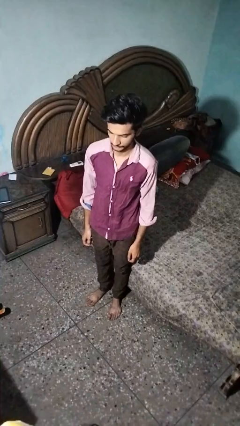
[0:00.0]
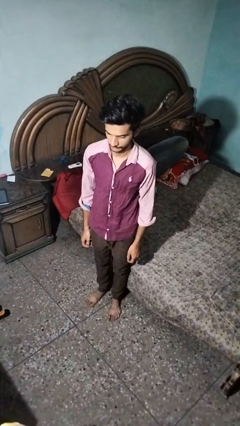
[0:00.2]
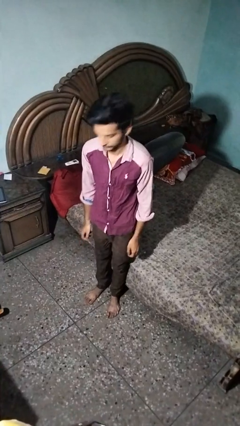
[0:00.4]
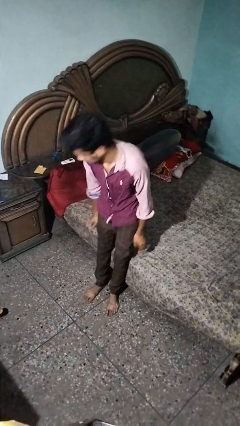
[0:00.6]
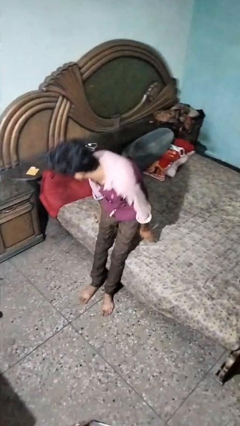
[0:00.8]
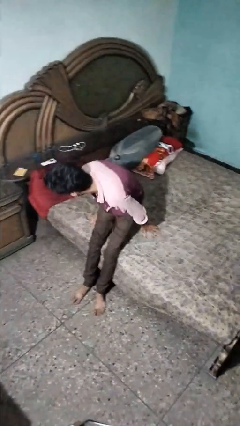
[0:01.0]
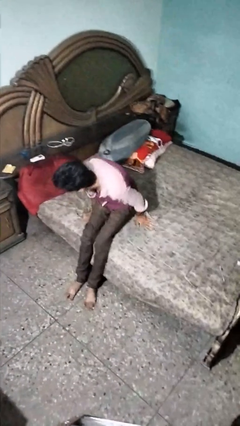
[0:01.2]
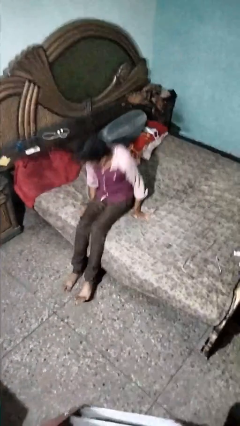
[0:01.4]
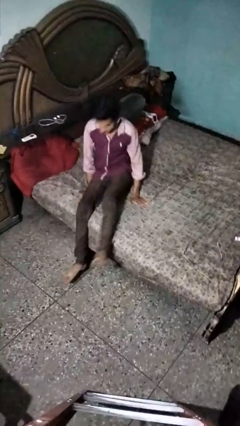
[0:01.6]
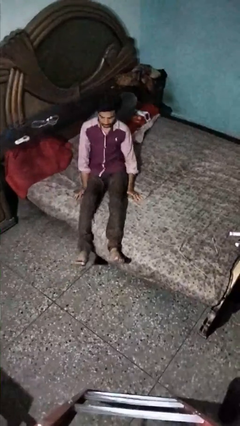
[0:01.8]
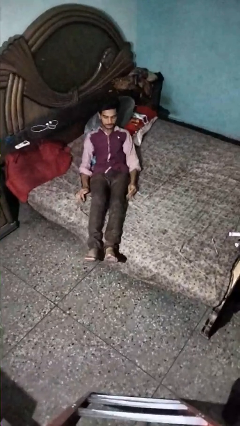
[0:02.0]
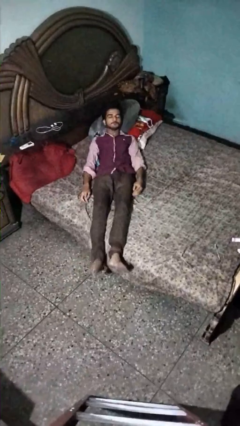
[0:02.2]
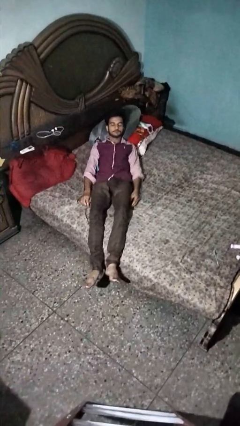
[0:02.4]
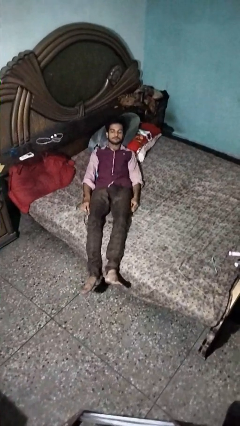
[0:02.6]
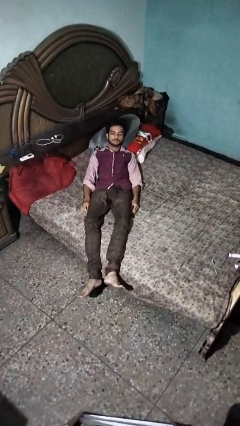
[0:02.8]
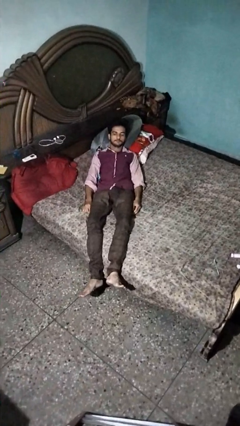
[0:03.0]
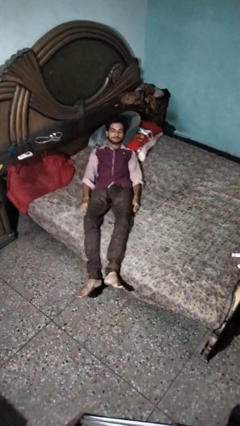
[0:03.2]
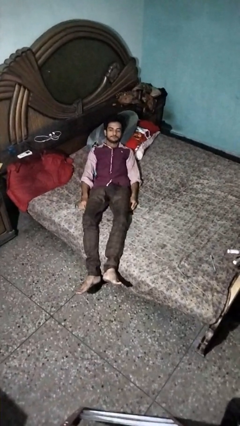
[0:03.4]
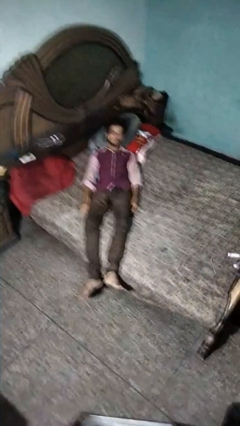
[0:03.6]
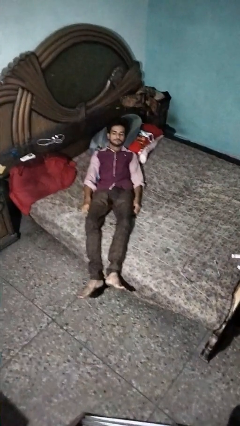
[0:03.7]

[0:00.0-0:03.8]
person lies down on bed

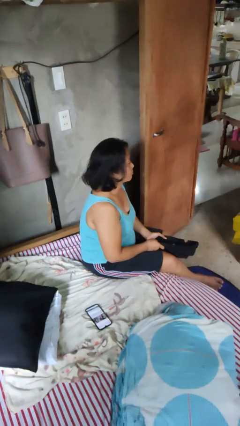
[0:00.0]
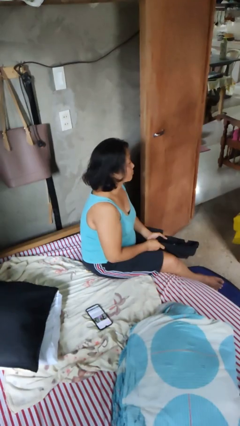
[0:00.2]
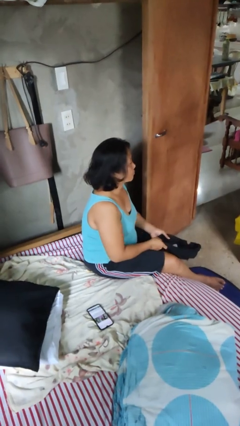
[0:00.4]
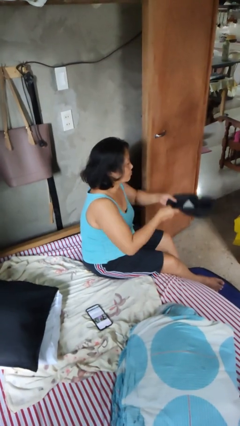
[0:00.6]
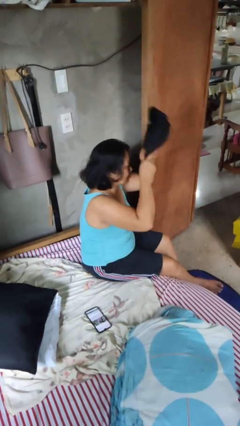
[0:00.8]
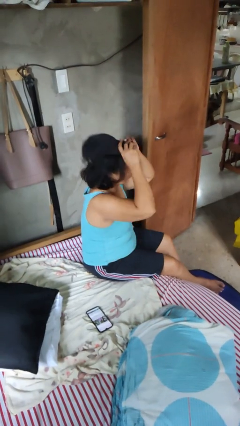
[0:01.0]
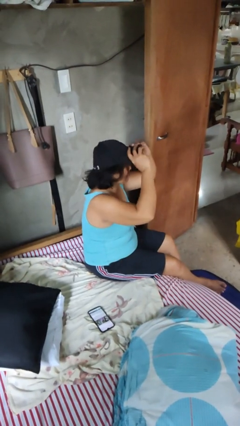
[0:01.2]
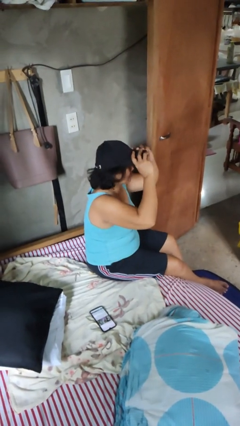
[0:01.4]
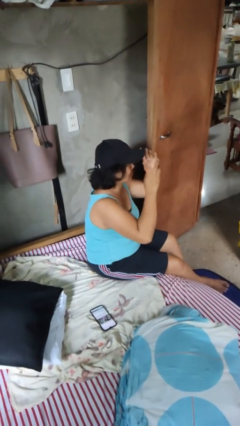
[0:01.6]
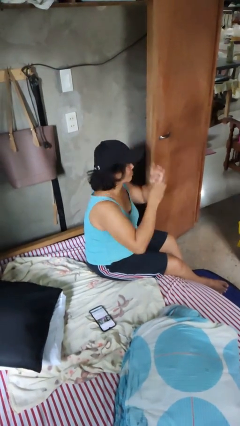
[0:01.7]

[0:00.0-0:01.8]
person puts on hat

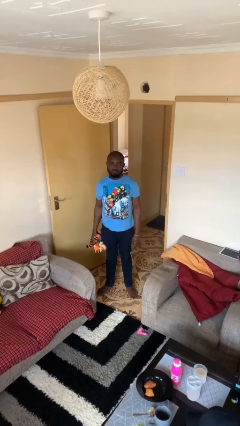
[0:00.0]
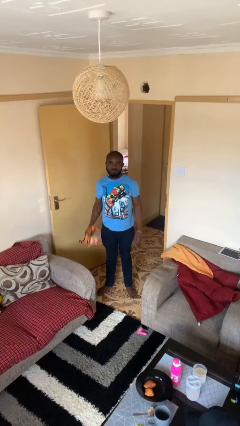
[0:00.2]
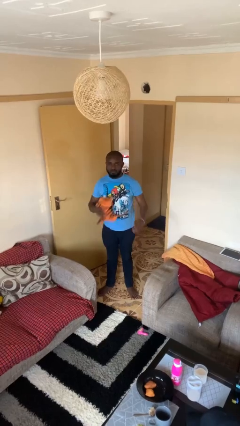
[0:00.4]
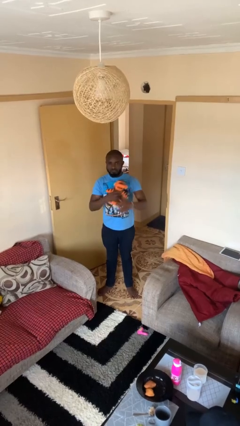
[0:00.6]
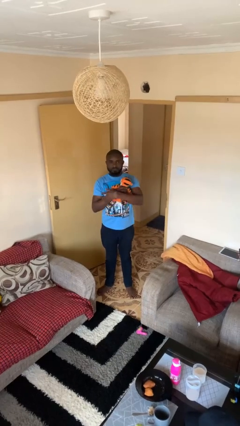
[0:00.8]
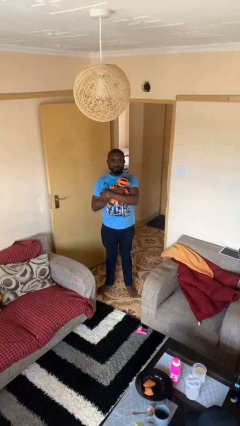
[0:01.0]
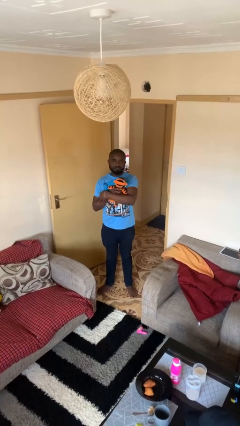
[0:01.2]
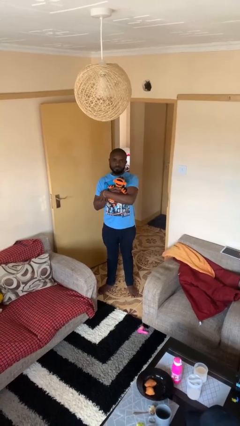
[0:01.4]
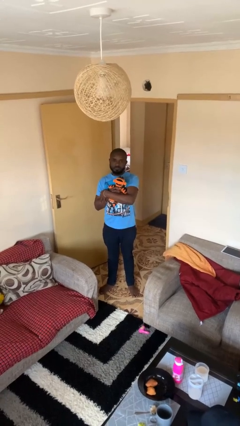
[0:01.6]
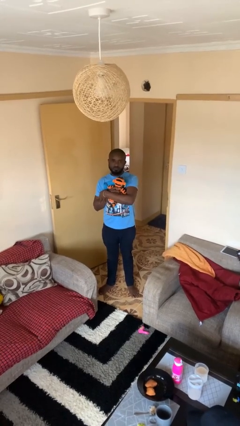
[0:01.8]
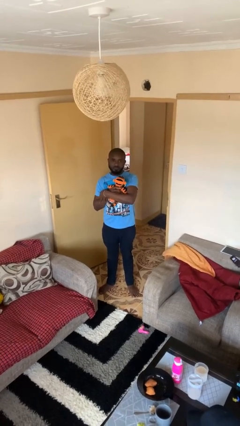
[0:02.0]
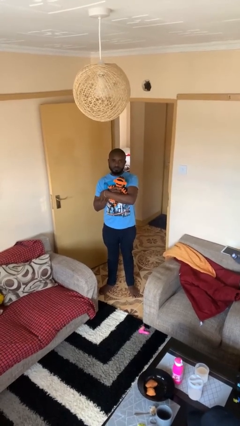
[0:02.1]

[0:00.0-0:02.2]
person hugs stuffed animal

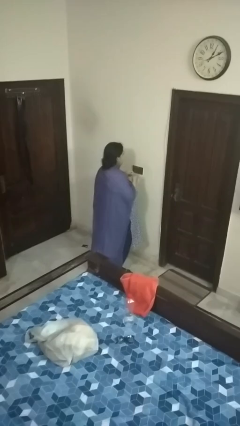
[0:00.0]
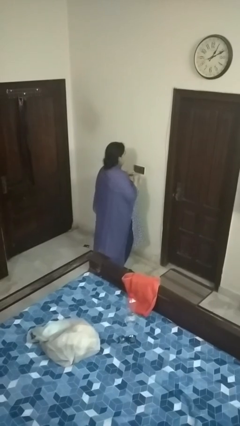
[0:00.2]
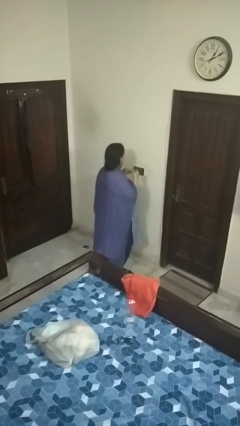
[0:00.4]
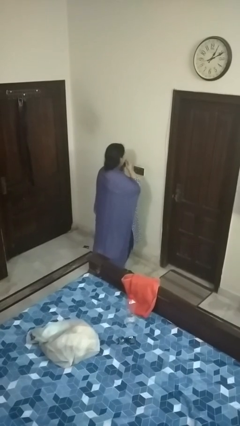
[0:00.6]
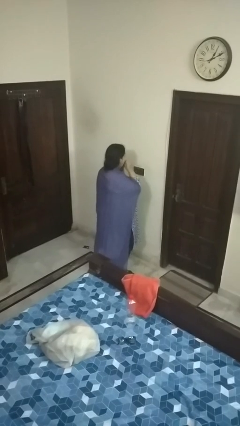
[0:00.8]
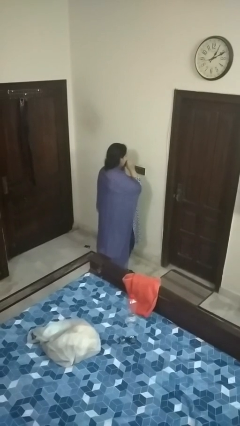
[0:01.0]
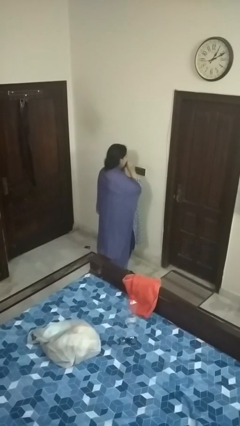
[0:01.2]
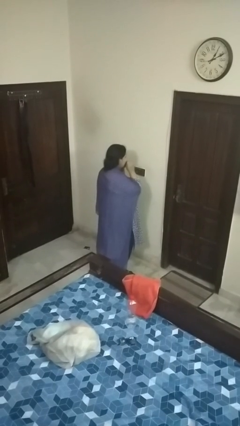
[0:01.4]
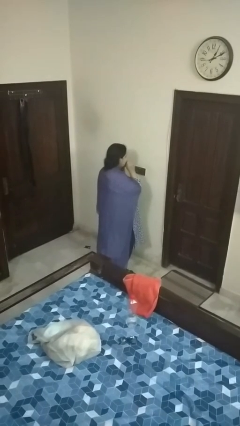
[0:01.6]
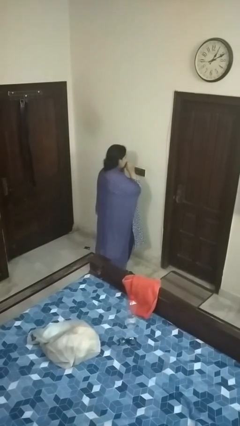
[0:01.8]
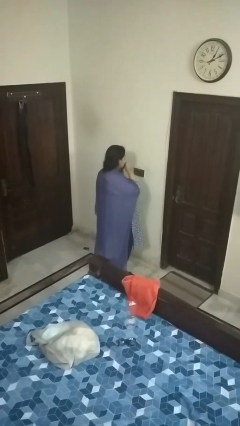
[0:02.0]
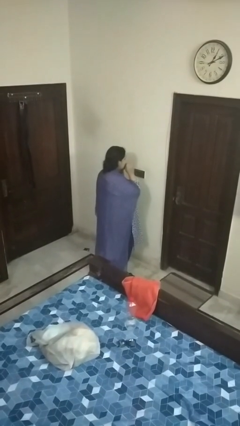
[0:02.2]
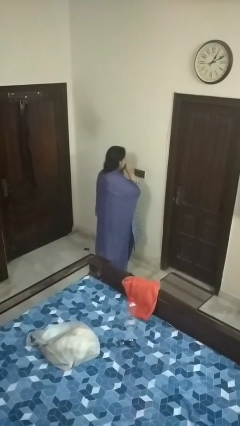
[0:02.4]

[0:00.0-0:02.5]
person flosses

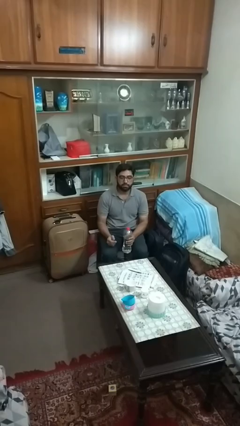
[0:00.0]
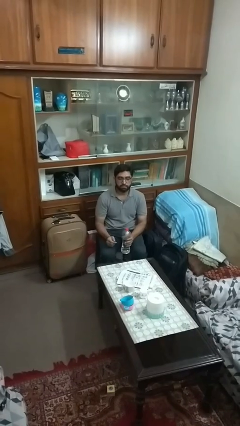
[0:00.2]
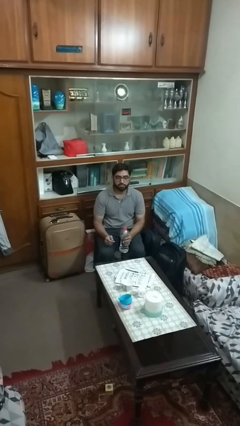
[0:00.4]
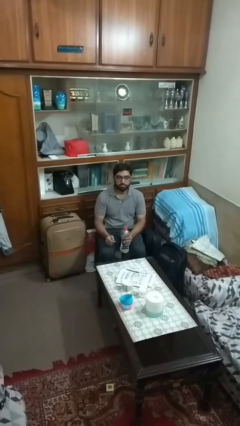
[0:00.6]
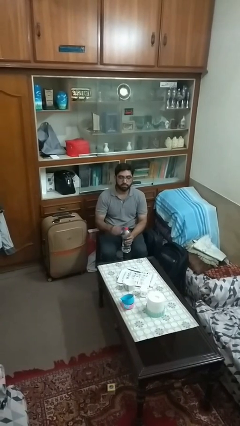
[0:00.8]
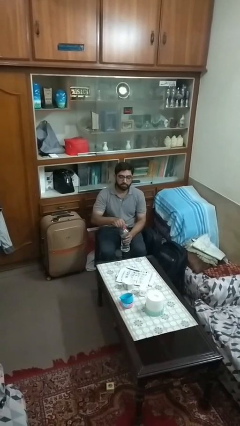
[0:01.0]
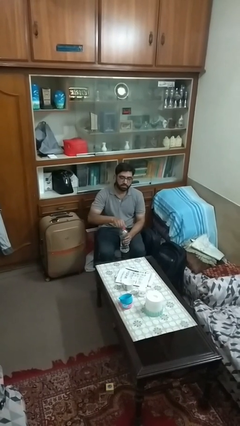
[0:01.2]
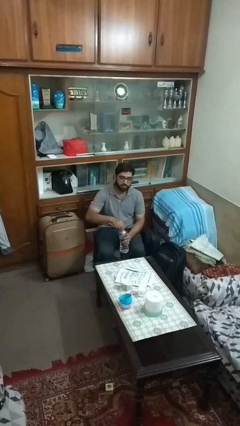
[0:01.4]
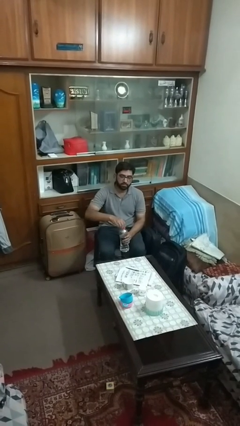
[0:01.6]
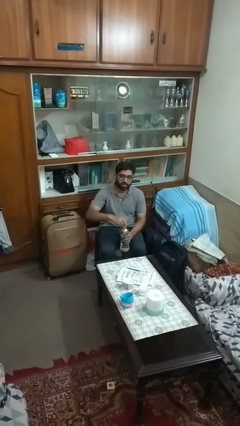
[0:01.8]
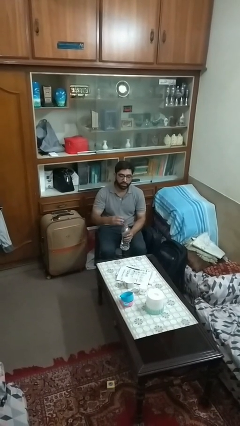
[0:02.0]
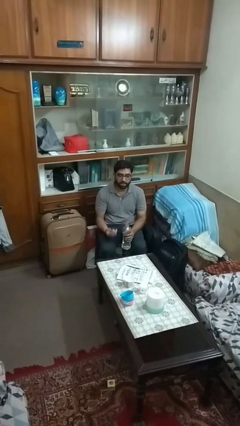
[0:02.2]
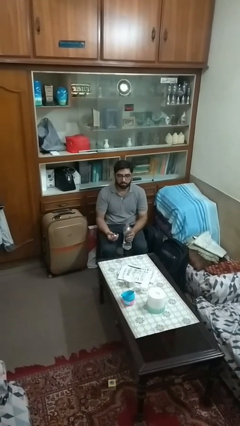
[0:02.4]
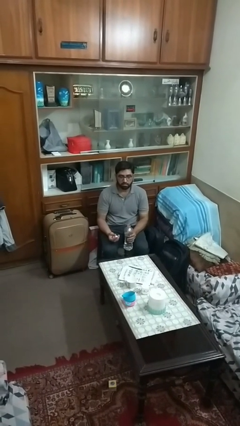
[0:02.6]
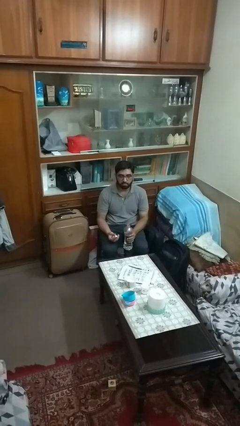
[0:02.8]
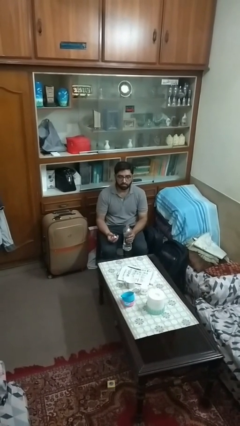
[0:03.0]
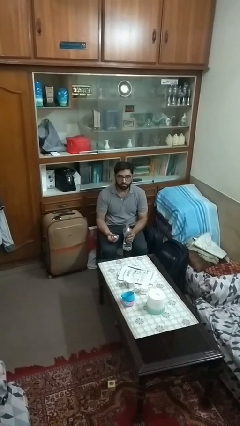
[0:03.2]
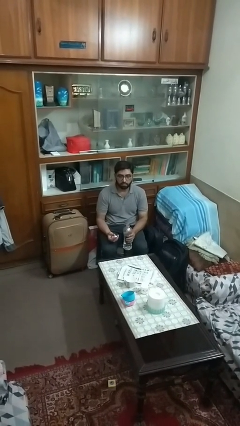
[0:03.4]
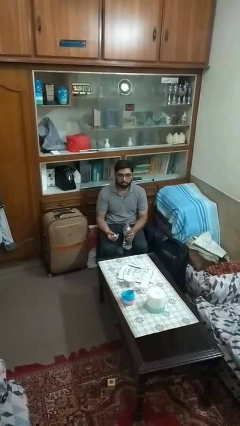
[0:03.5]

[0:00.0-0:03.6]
person unscrews lid from bottle

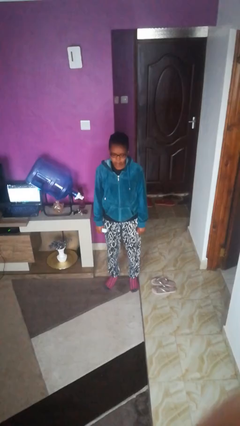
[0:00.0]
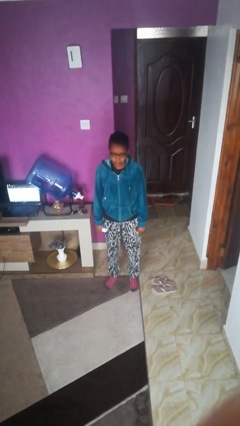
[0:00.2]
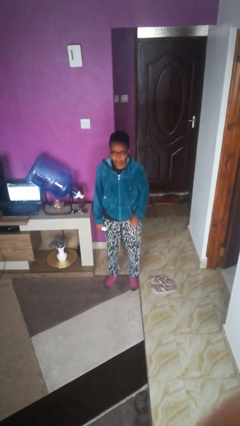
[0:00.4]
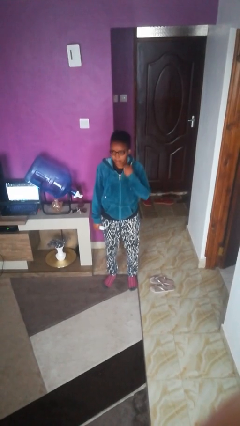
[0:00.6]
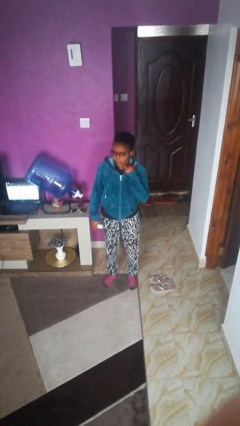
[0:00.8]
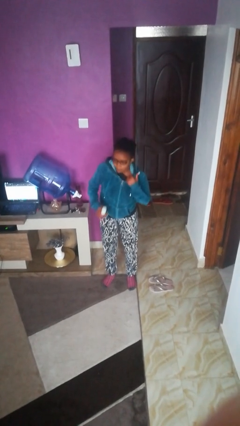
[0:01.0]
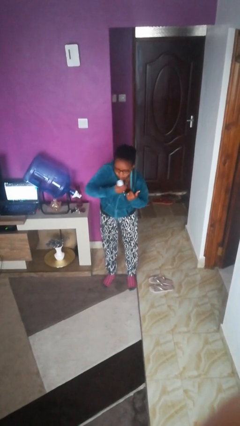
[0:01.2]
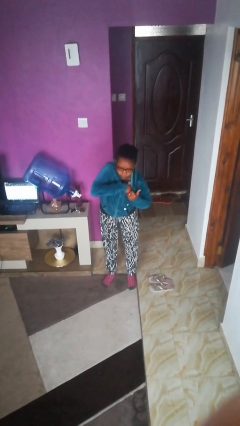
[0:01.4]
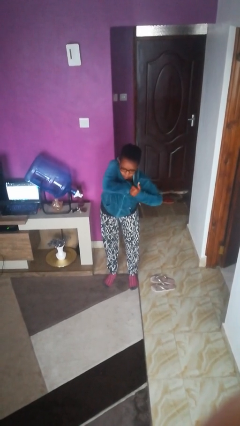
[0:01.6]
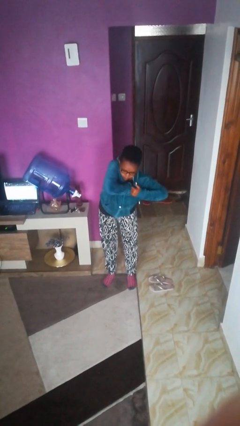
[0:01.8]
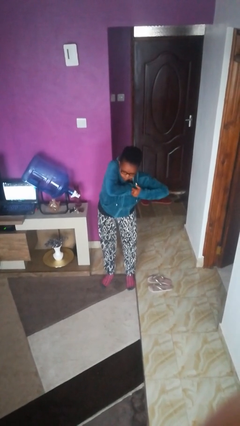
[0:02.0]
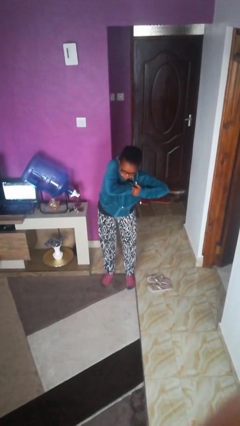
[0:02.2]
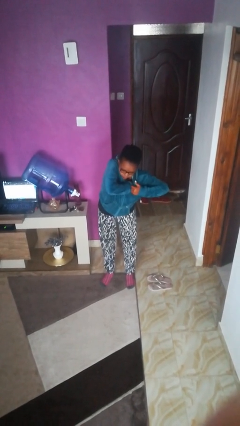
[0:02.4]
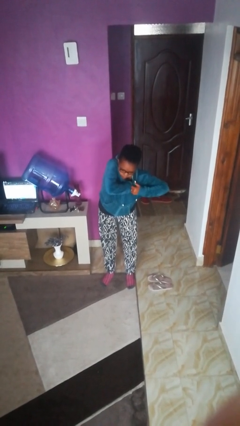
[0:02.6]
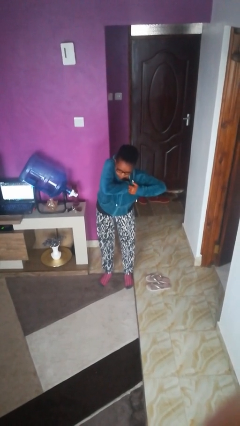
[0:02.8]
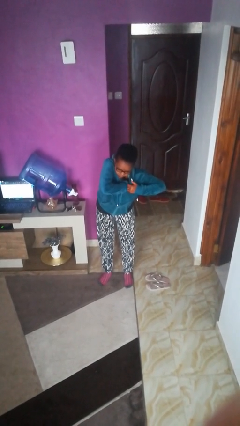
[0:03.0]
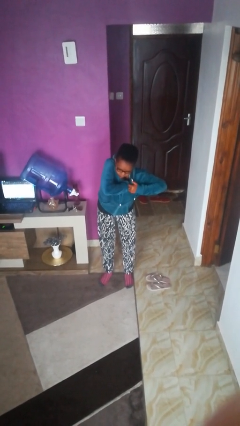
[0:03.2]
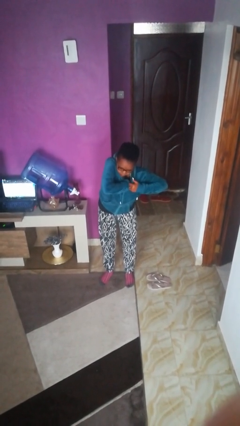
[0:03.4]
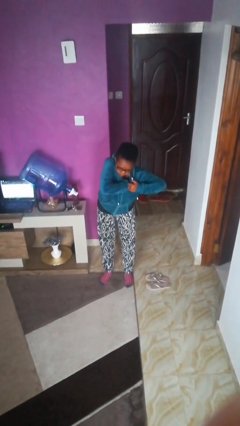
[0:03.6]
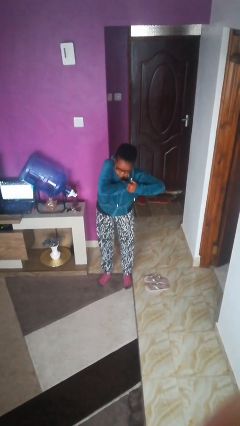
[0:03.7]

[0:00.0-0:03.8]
person applies deodorant
